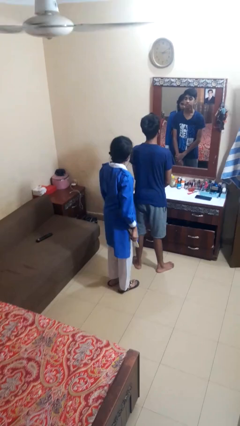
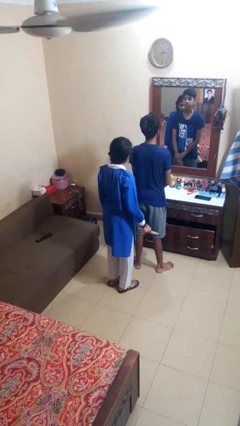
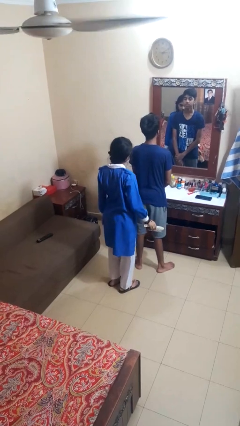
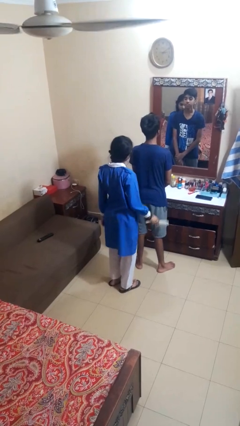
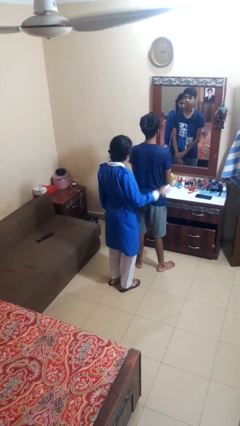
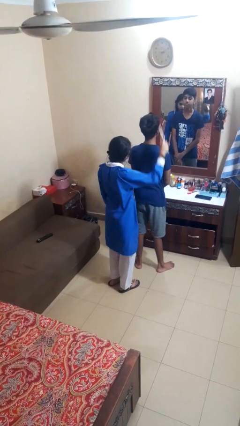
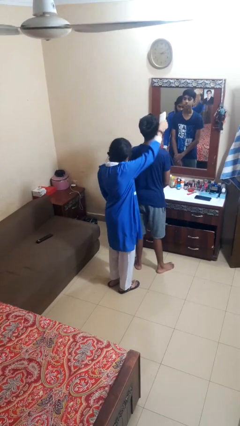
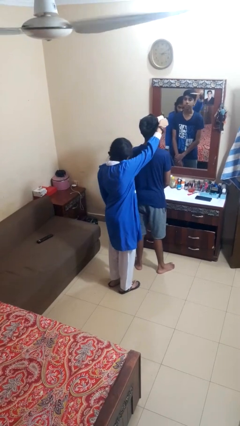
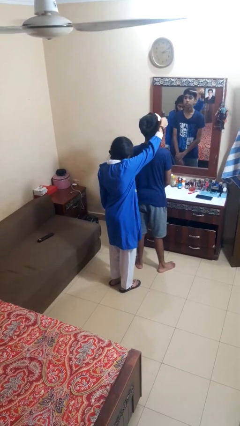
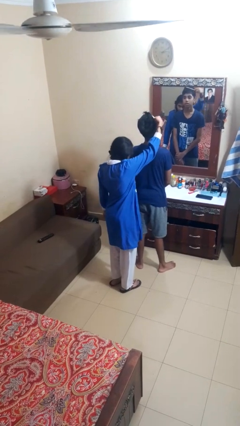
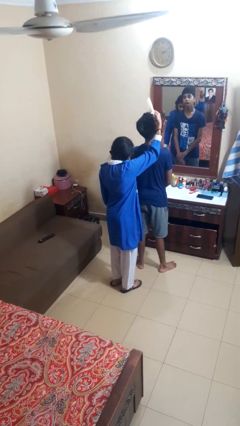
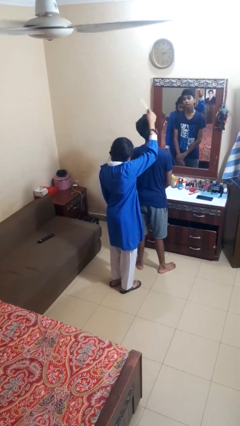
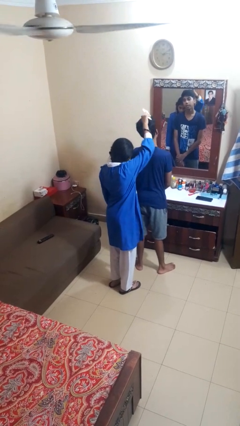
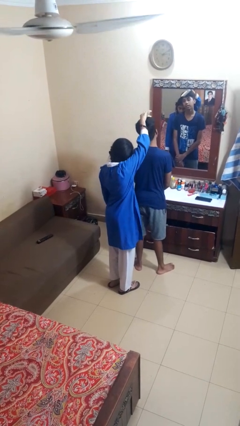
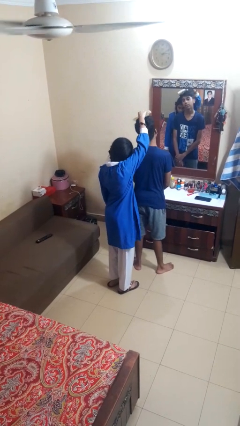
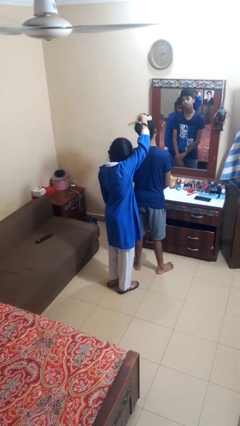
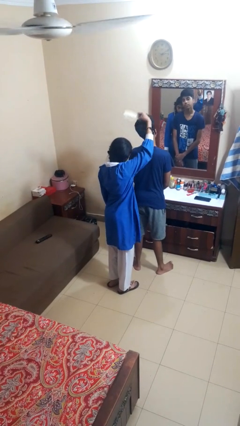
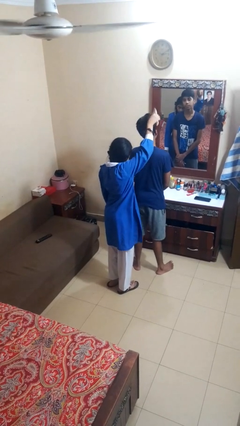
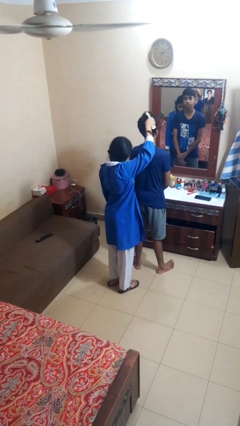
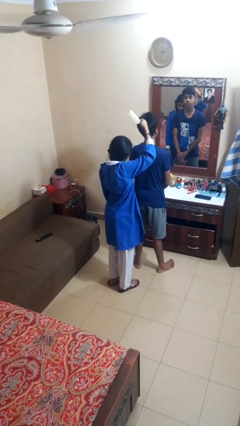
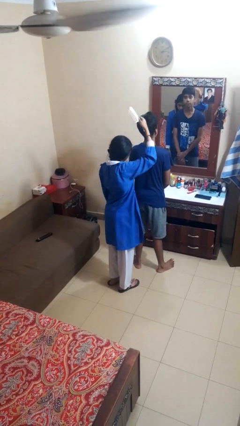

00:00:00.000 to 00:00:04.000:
person brushes hair of person

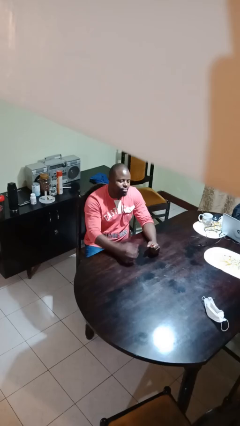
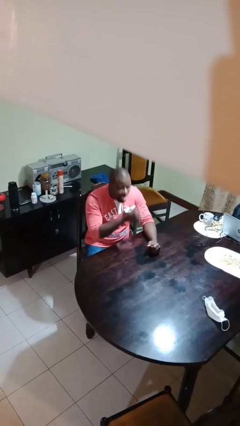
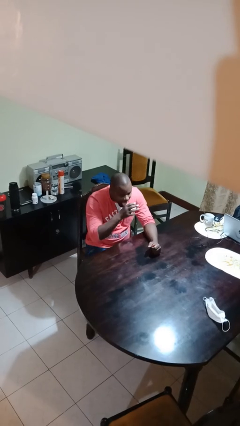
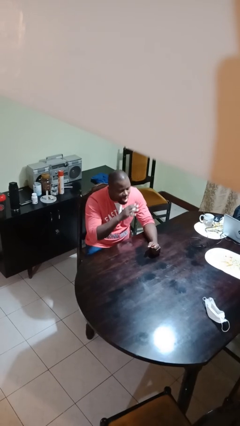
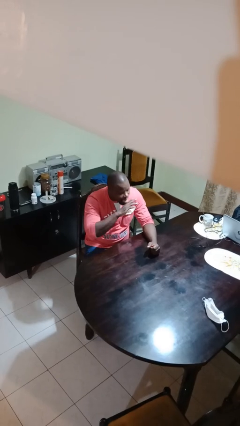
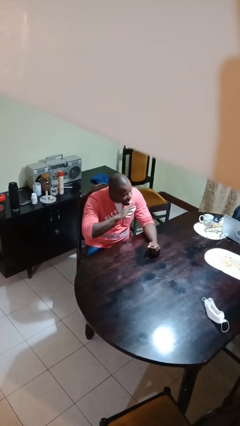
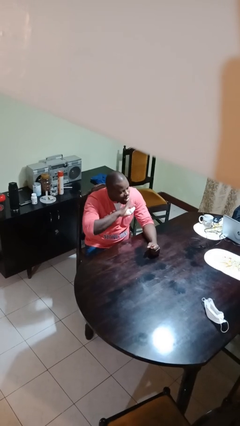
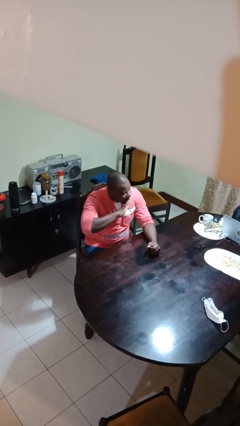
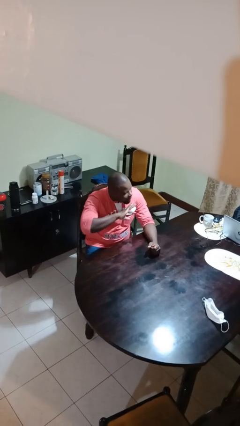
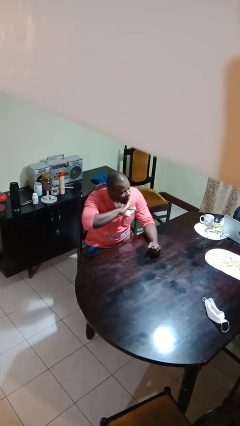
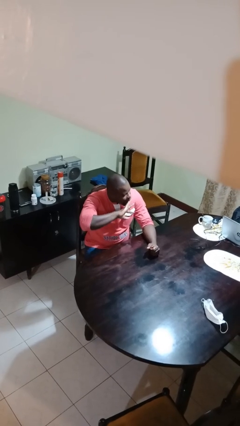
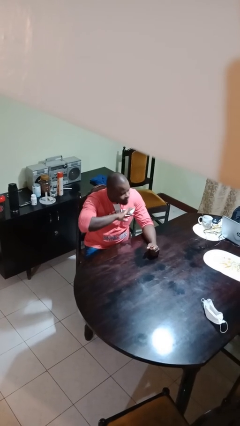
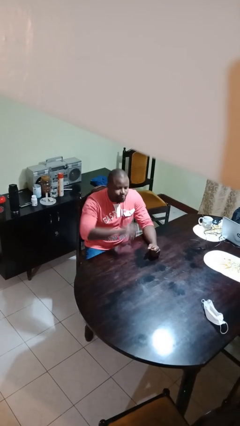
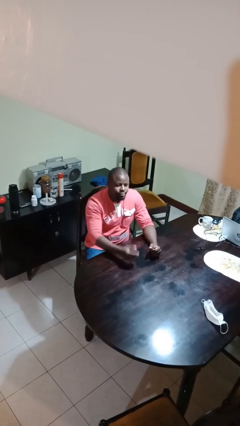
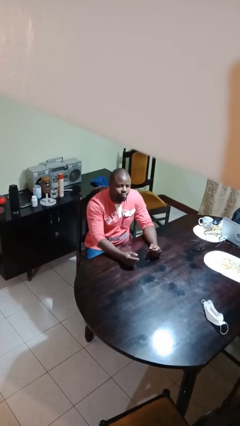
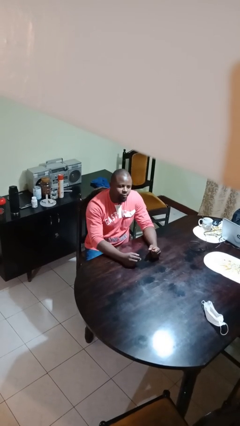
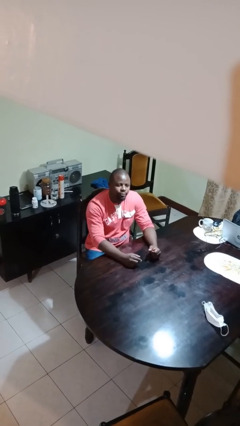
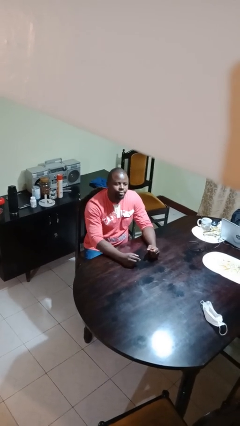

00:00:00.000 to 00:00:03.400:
person licks fingers

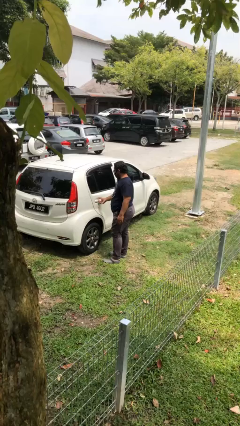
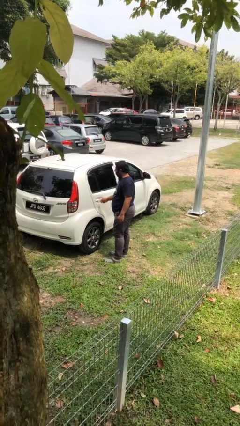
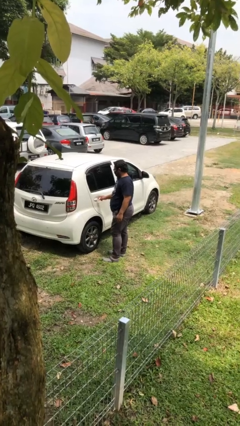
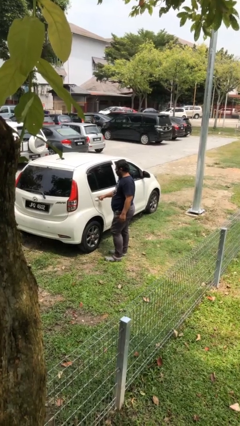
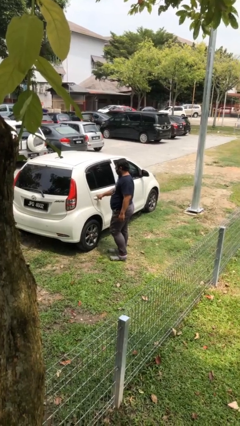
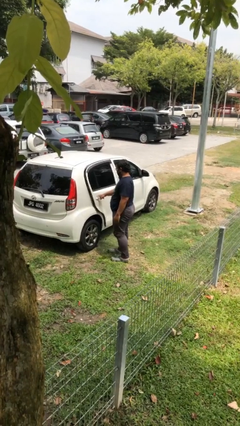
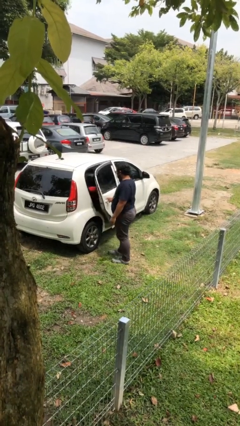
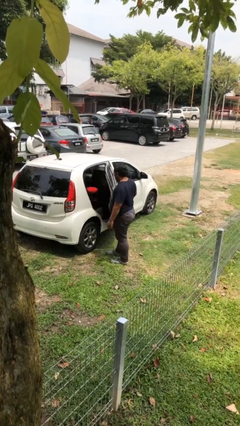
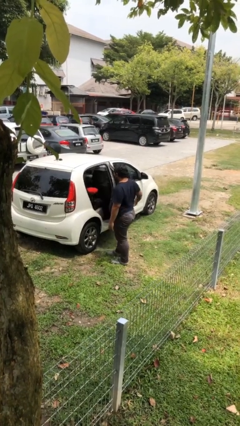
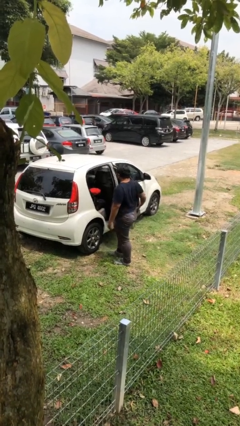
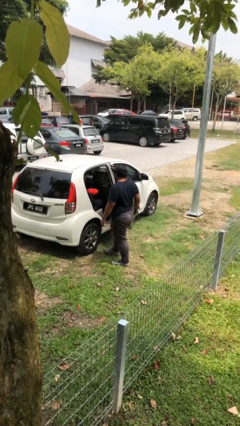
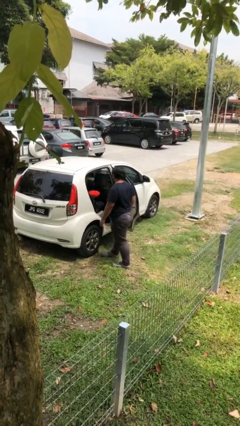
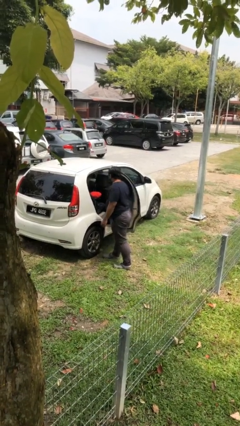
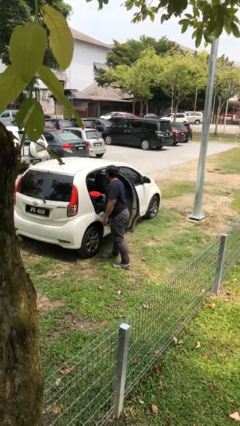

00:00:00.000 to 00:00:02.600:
person opens car door

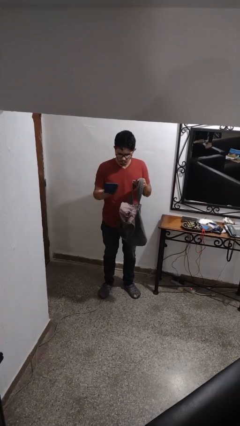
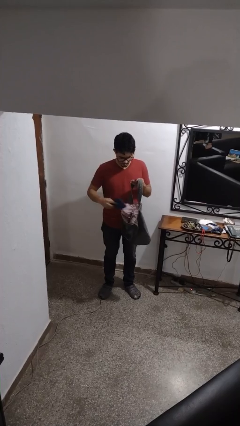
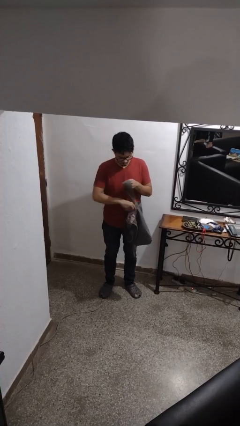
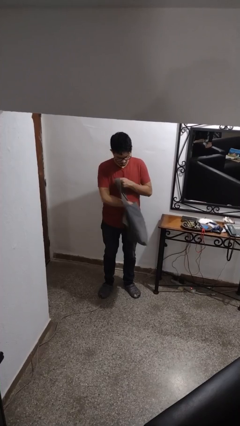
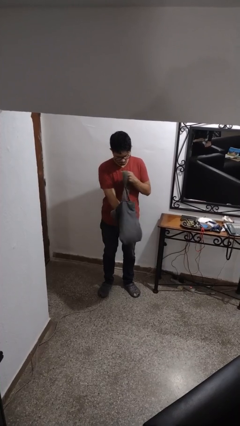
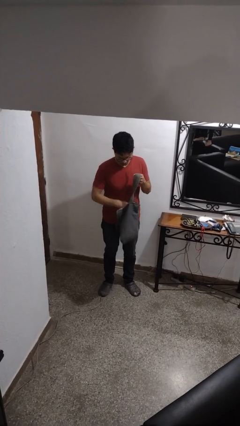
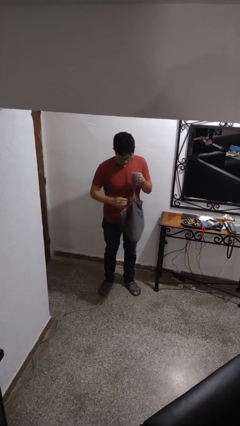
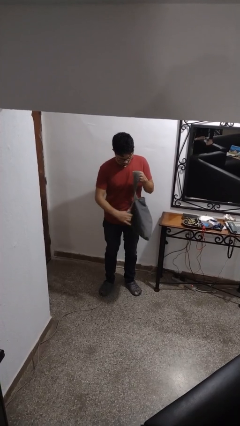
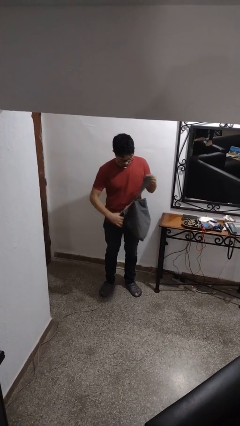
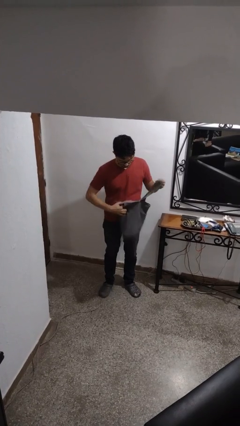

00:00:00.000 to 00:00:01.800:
person puts object into purse

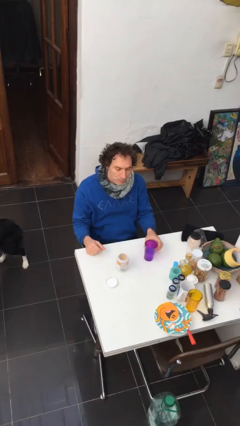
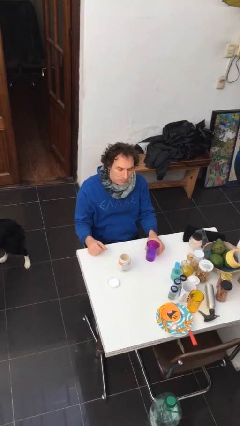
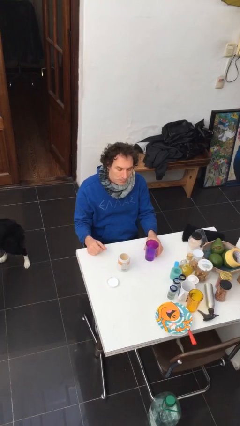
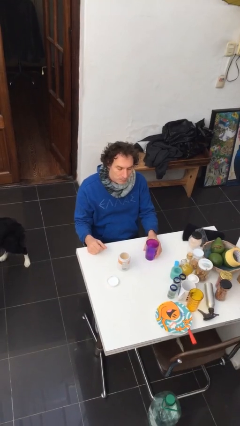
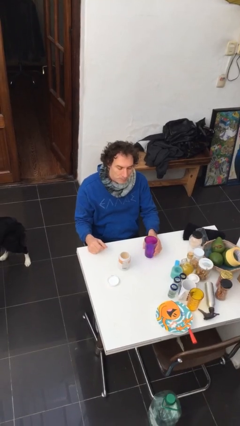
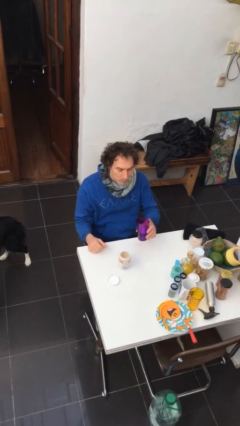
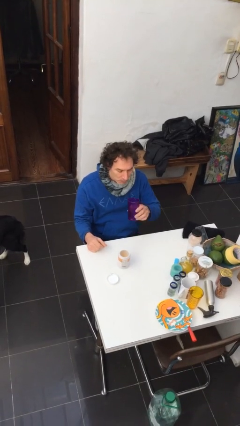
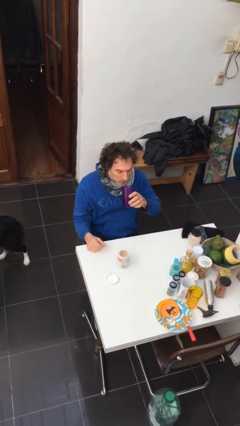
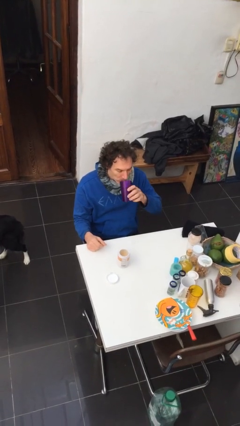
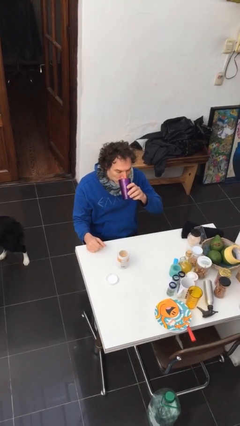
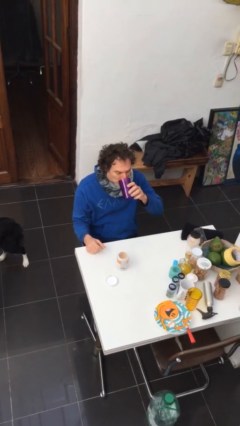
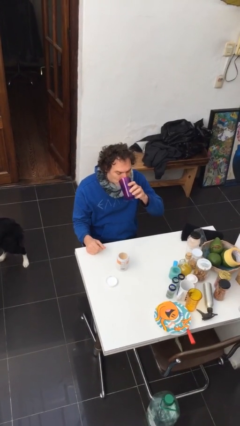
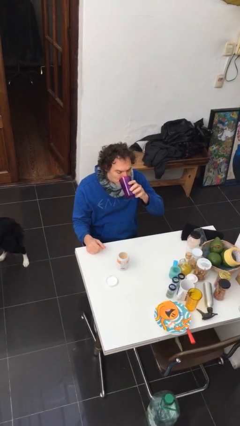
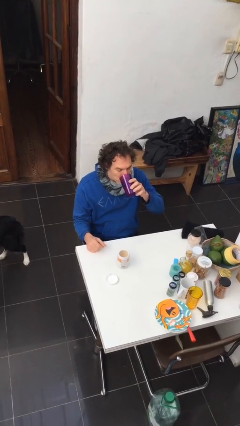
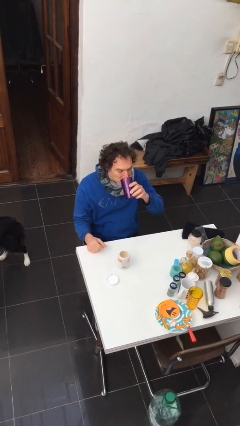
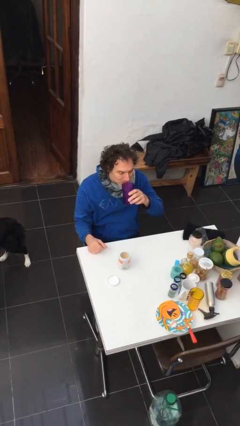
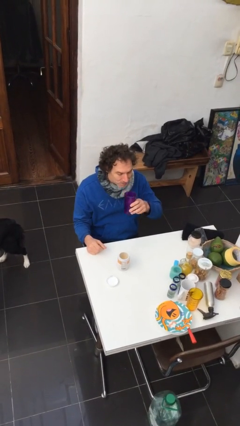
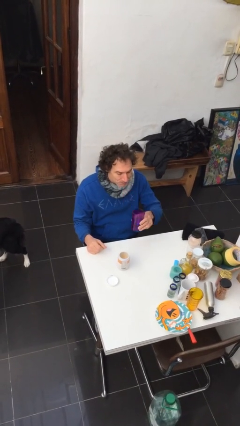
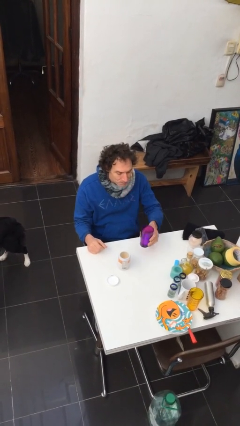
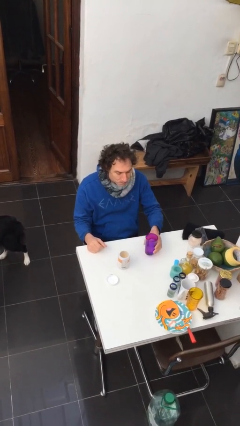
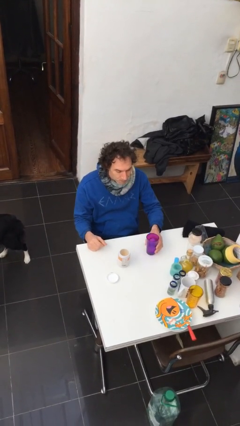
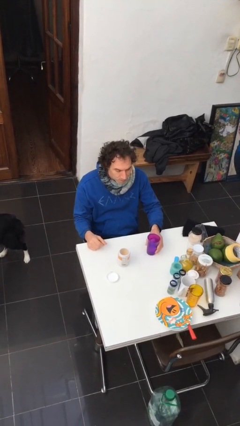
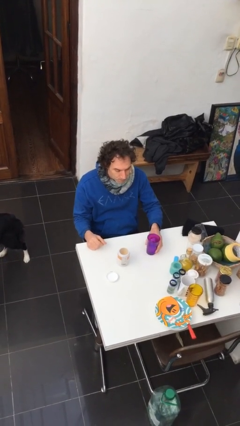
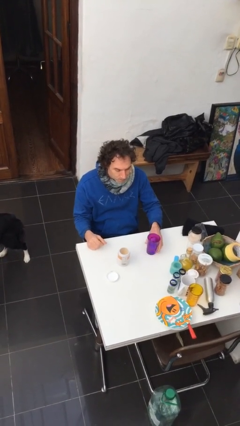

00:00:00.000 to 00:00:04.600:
person drinks from cup

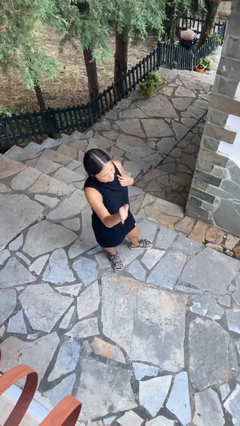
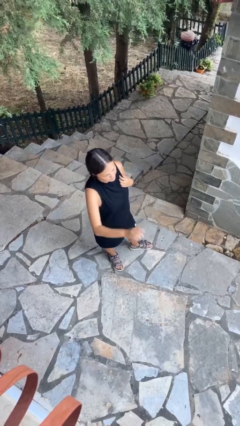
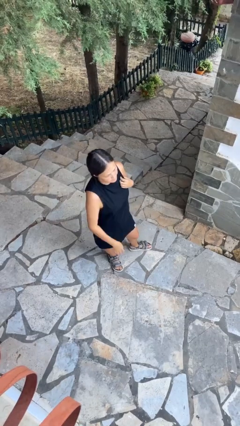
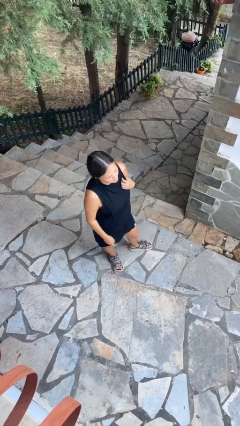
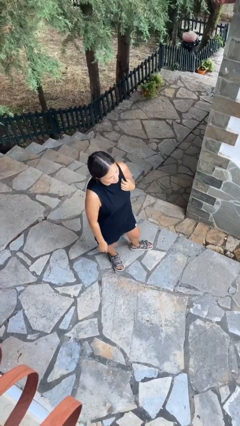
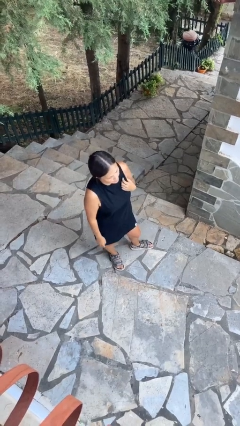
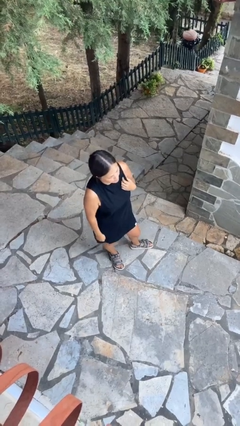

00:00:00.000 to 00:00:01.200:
person waves at person
